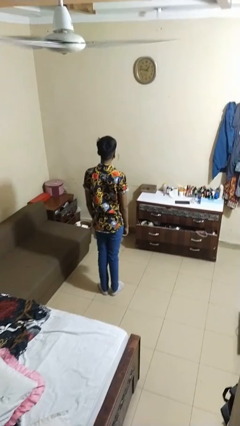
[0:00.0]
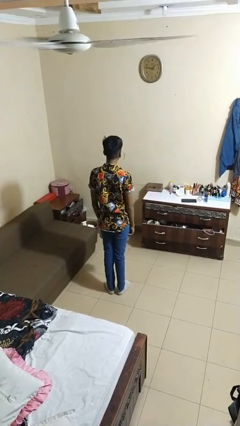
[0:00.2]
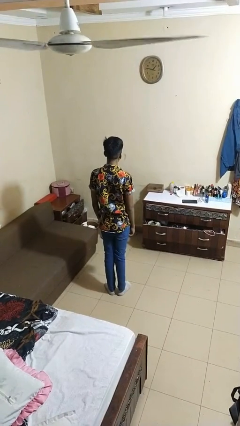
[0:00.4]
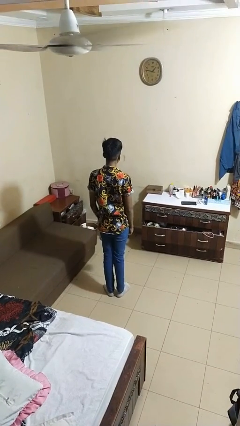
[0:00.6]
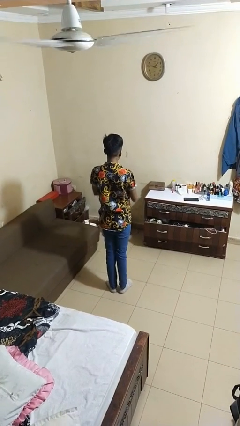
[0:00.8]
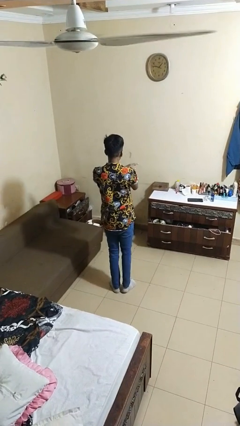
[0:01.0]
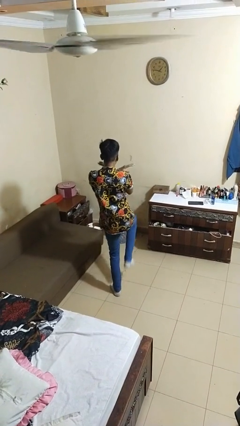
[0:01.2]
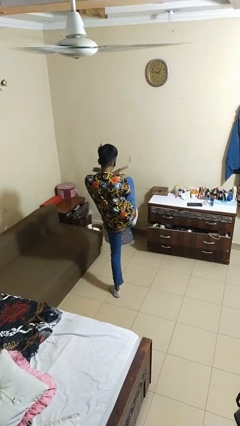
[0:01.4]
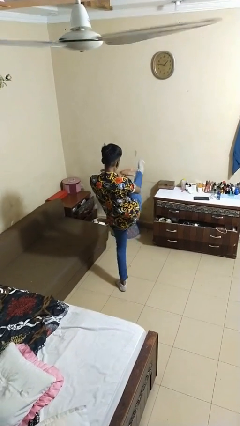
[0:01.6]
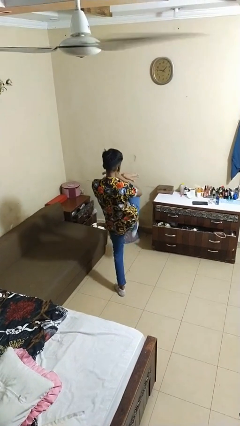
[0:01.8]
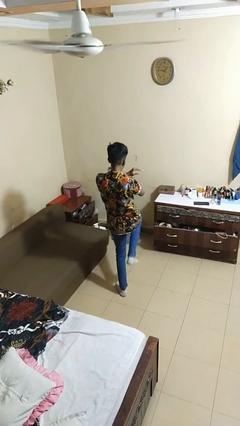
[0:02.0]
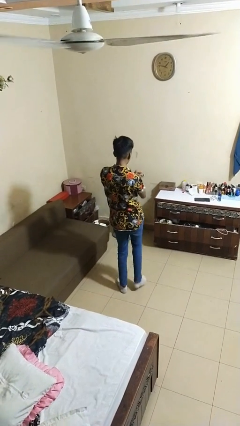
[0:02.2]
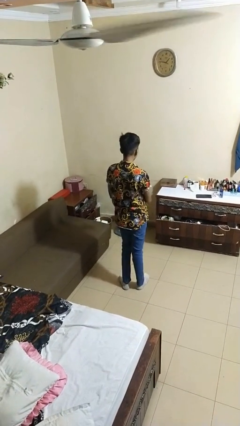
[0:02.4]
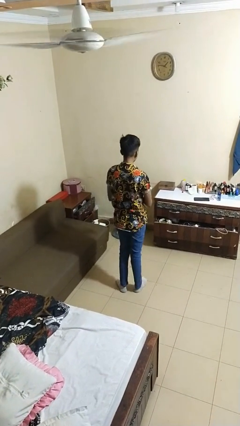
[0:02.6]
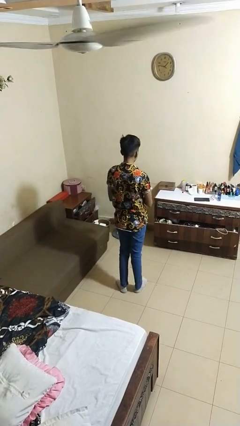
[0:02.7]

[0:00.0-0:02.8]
person karate kicks

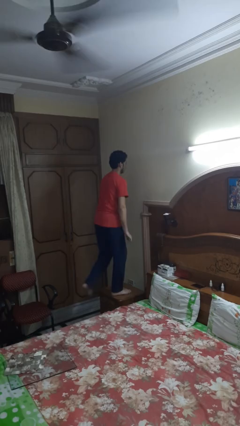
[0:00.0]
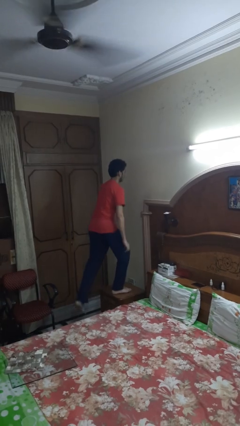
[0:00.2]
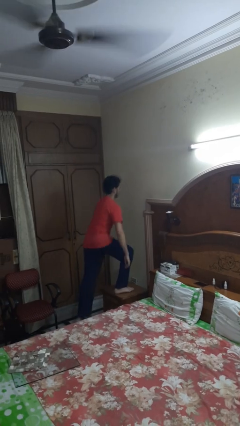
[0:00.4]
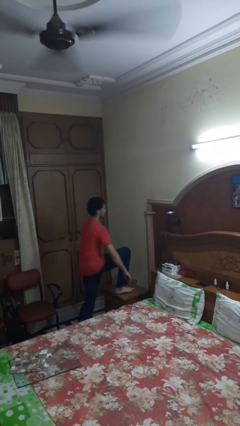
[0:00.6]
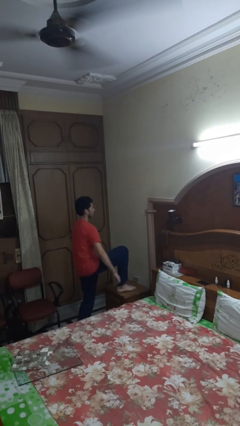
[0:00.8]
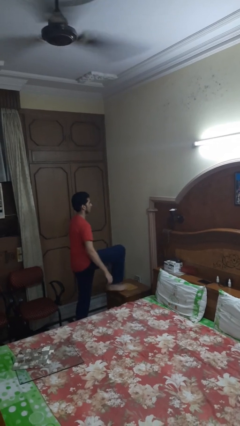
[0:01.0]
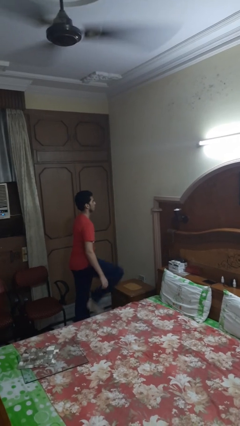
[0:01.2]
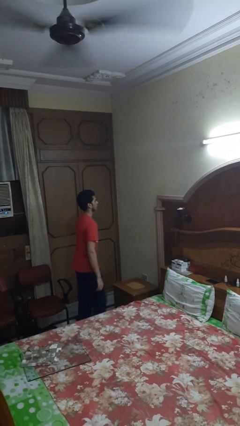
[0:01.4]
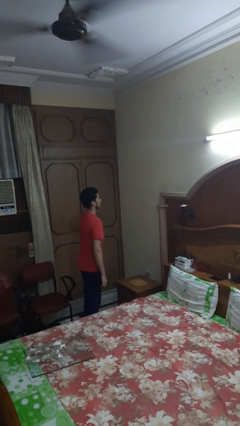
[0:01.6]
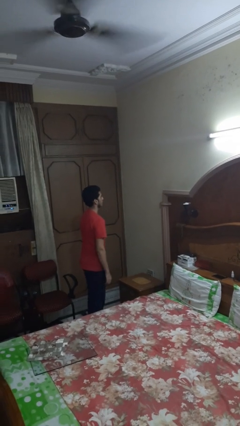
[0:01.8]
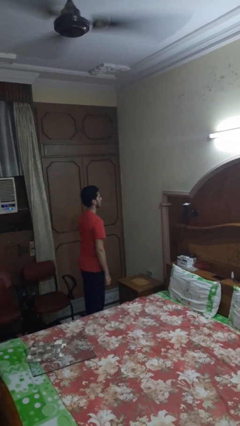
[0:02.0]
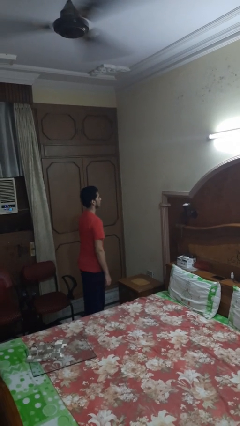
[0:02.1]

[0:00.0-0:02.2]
person climbs off table

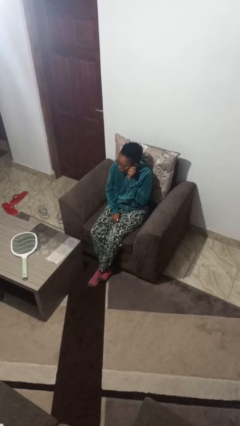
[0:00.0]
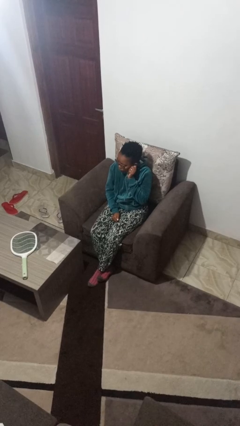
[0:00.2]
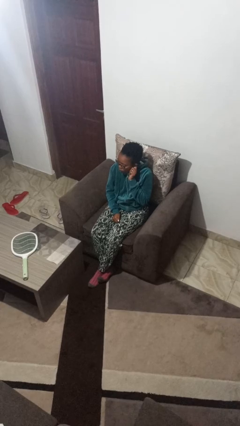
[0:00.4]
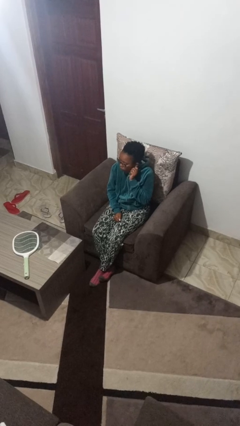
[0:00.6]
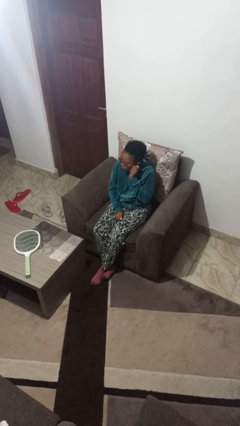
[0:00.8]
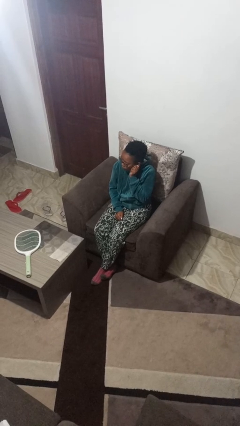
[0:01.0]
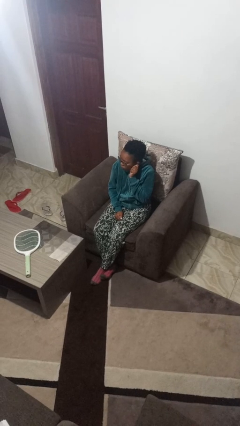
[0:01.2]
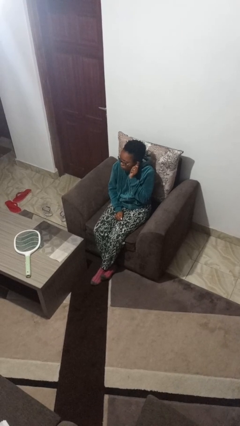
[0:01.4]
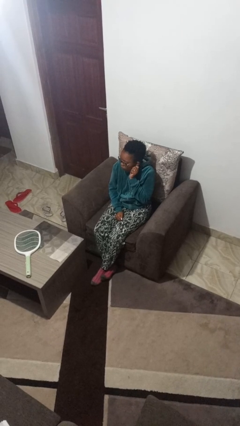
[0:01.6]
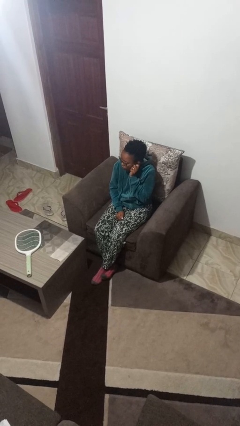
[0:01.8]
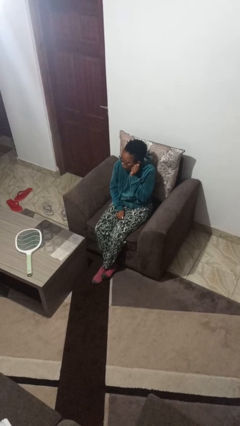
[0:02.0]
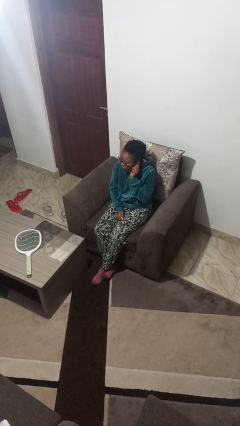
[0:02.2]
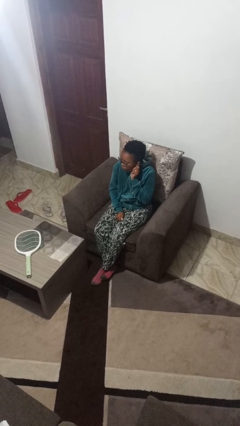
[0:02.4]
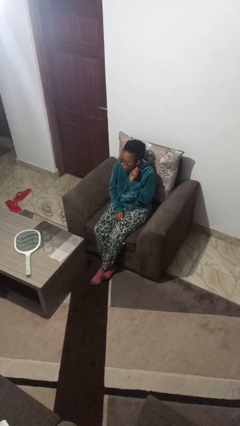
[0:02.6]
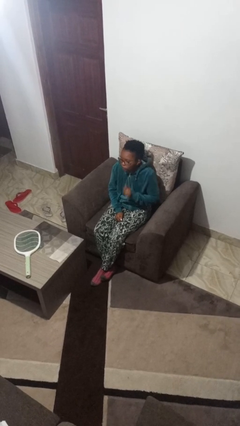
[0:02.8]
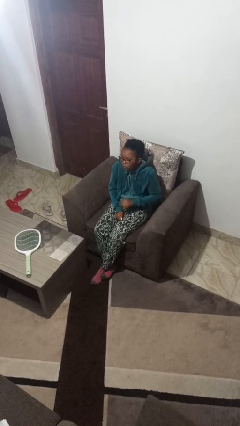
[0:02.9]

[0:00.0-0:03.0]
person touches earlobe

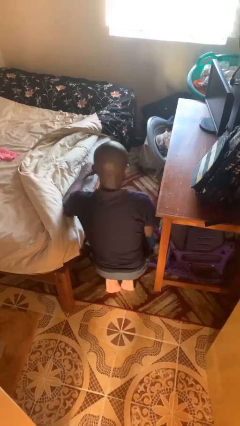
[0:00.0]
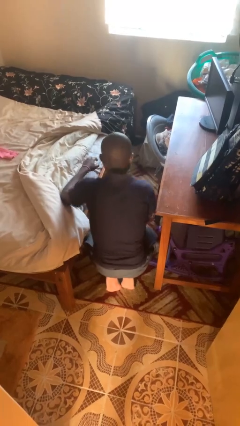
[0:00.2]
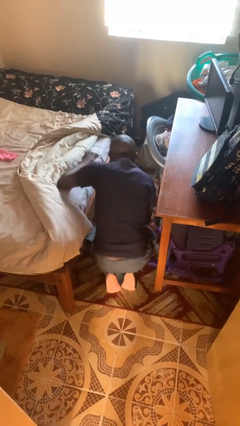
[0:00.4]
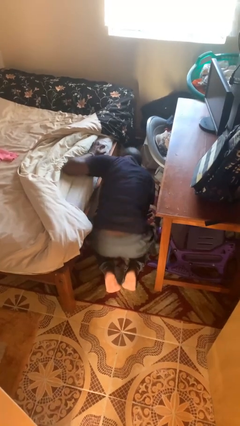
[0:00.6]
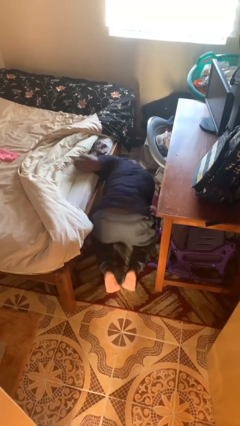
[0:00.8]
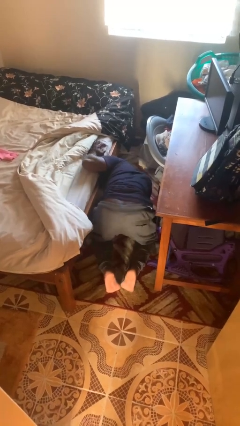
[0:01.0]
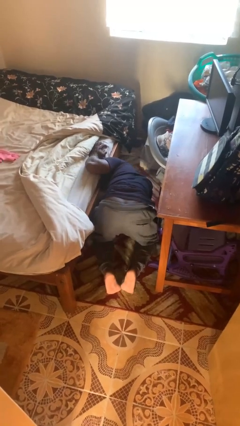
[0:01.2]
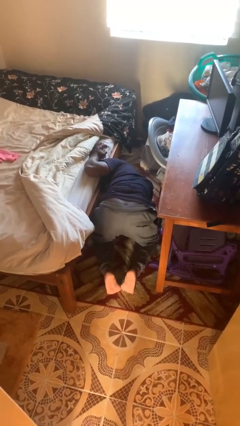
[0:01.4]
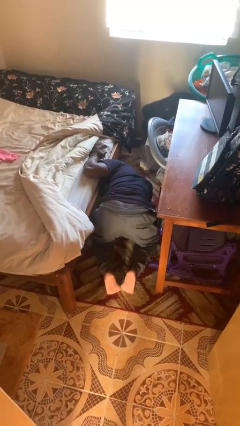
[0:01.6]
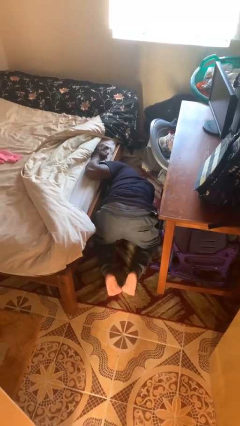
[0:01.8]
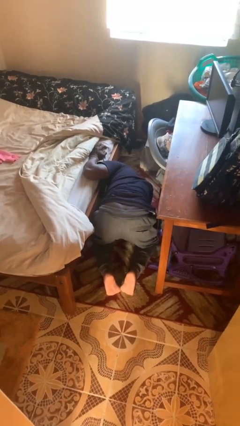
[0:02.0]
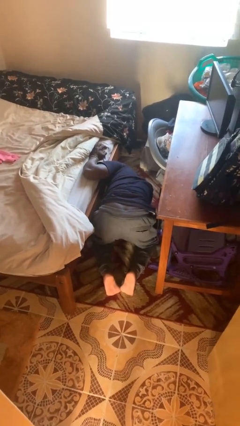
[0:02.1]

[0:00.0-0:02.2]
person searches under bed

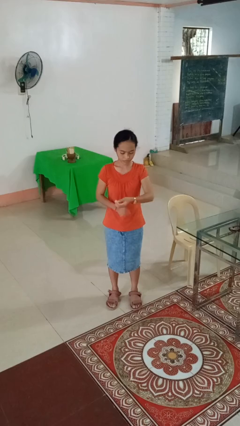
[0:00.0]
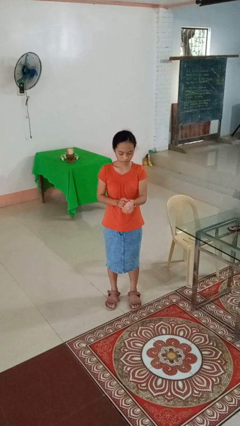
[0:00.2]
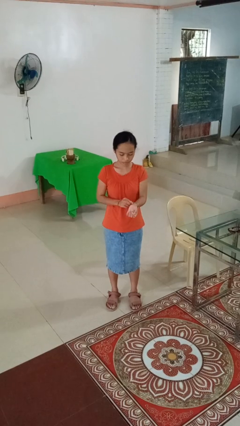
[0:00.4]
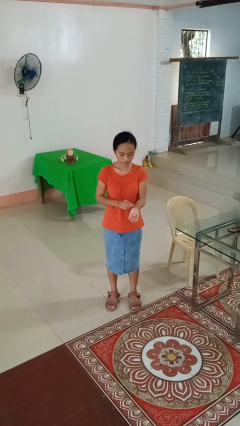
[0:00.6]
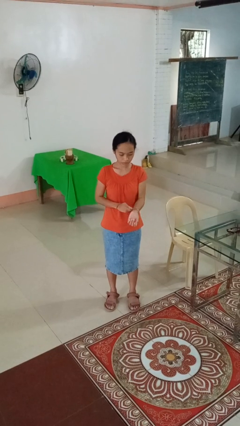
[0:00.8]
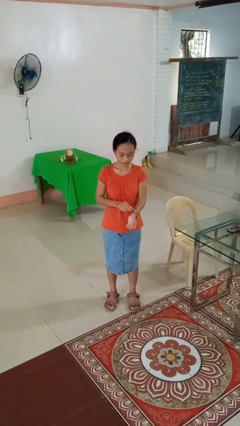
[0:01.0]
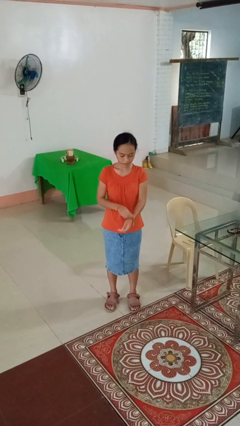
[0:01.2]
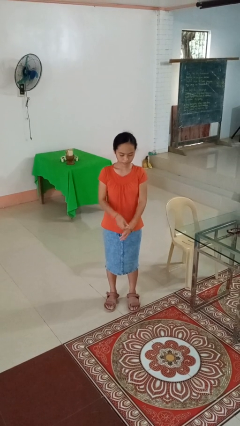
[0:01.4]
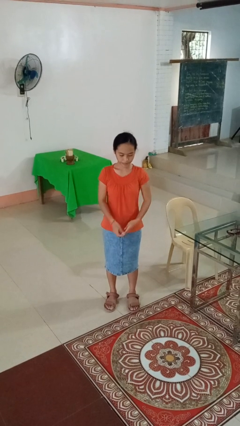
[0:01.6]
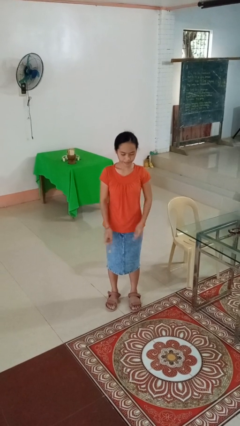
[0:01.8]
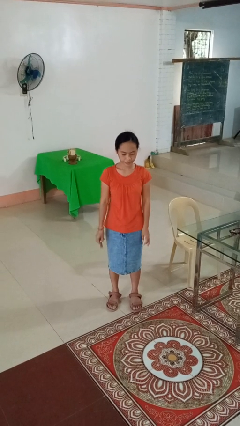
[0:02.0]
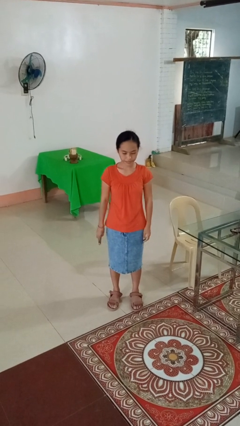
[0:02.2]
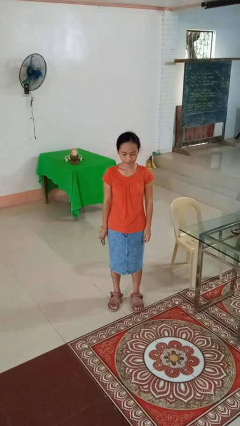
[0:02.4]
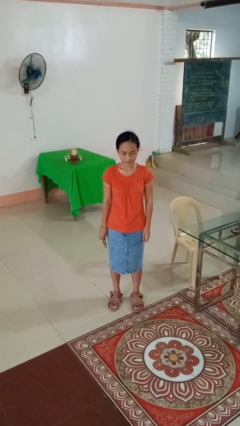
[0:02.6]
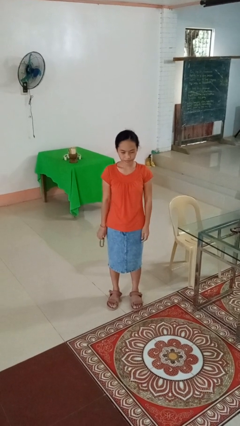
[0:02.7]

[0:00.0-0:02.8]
person takes off wristwatch

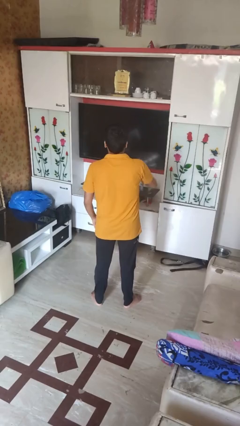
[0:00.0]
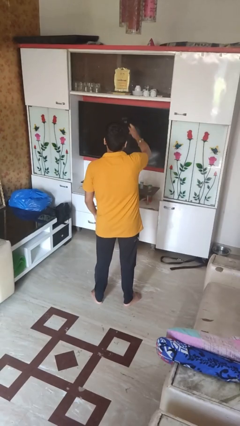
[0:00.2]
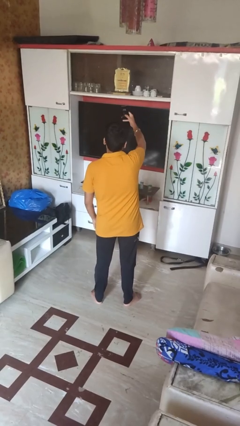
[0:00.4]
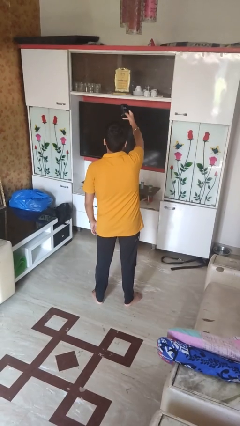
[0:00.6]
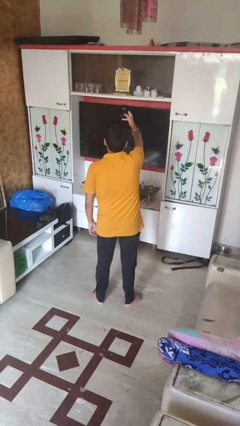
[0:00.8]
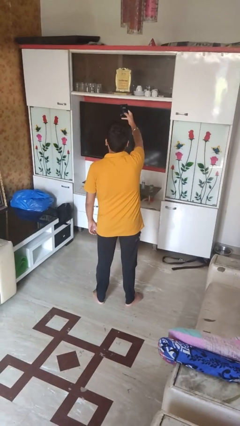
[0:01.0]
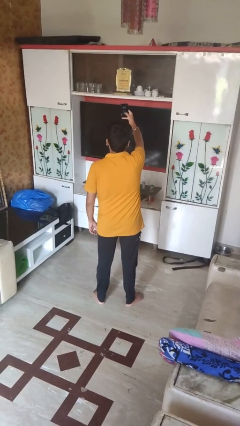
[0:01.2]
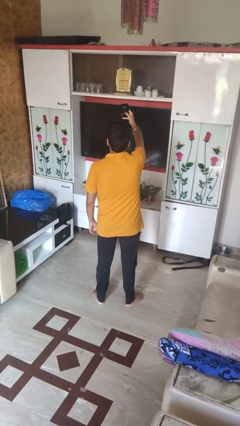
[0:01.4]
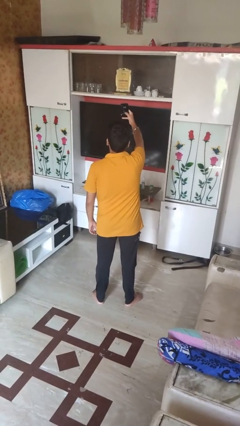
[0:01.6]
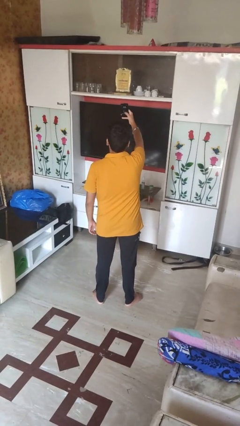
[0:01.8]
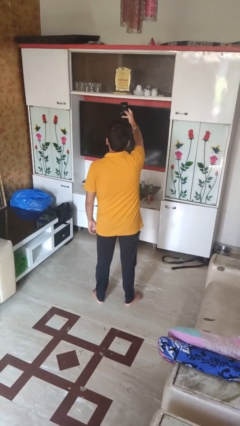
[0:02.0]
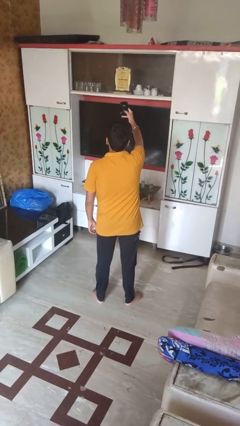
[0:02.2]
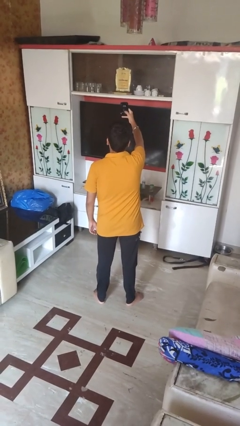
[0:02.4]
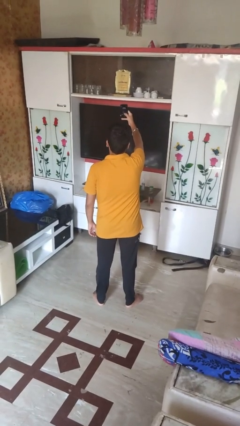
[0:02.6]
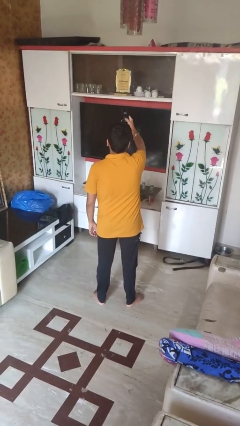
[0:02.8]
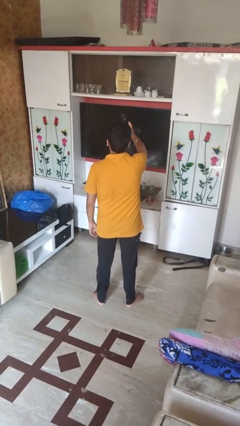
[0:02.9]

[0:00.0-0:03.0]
person takes selfie

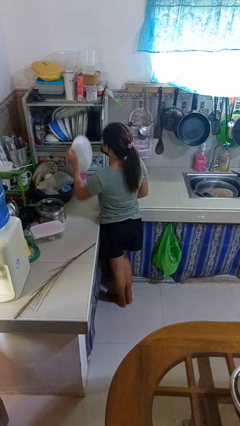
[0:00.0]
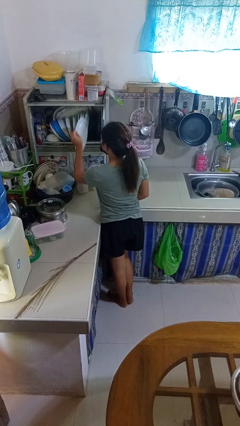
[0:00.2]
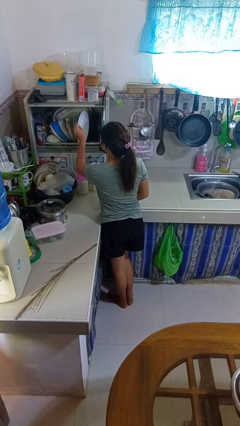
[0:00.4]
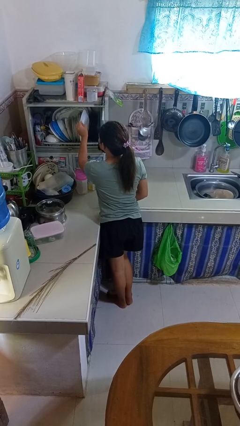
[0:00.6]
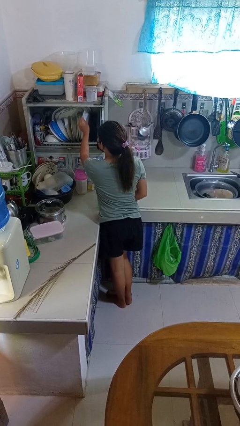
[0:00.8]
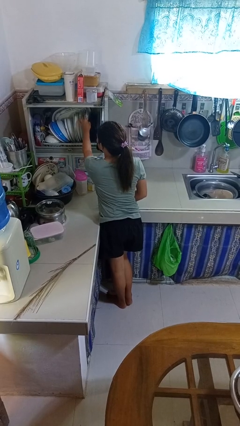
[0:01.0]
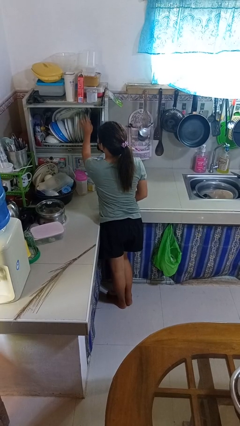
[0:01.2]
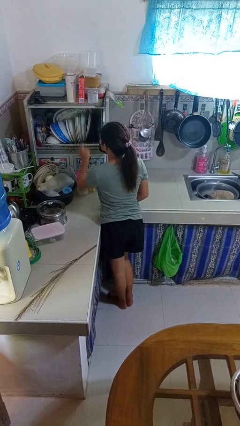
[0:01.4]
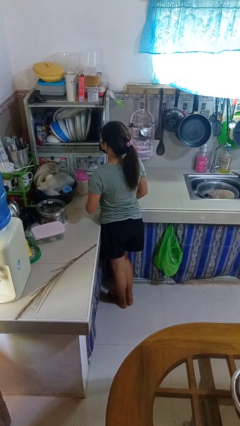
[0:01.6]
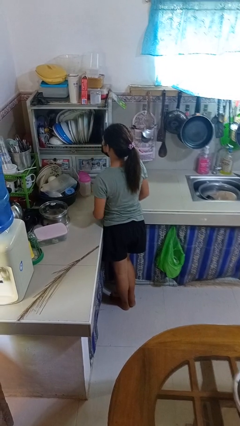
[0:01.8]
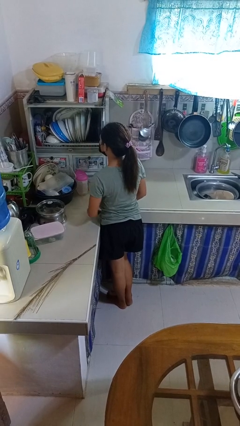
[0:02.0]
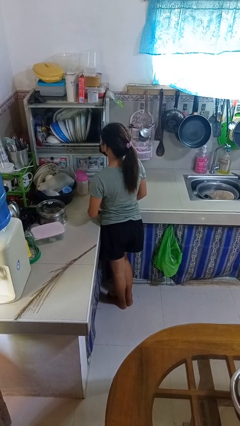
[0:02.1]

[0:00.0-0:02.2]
person puts object into kitchen drawer
